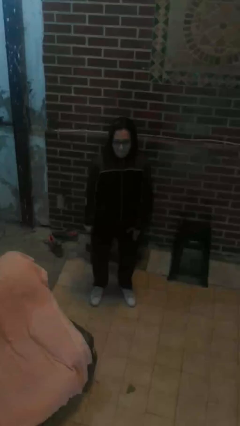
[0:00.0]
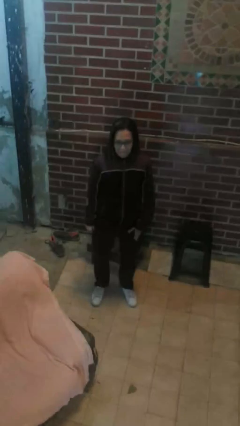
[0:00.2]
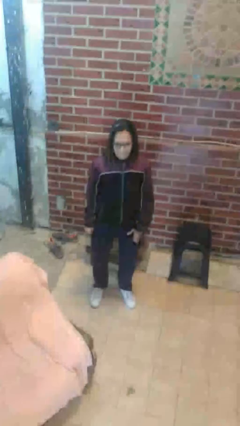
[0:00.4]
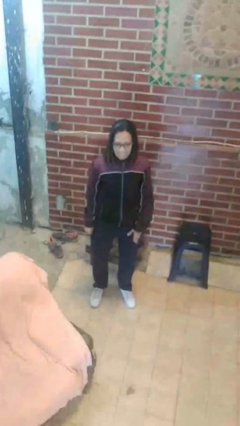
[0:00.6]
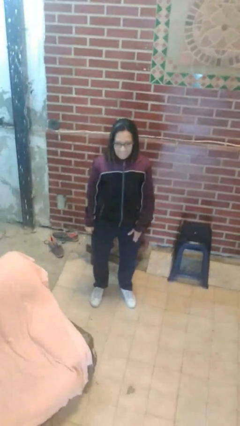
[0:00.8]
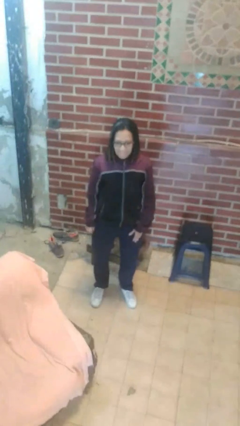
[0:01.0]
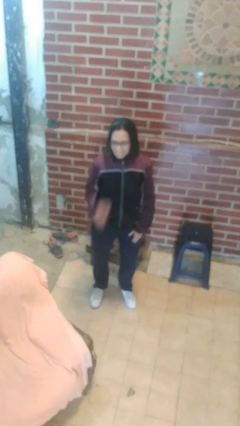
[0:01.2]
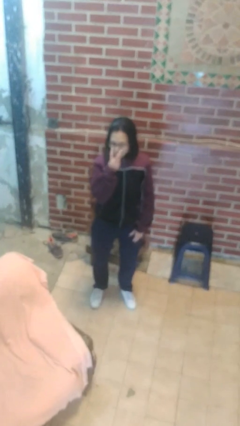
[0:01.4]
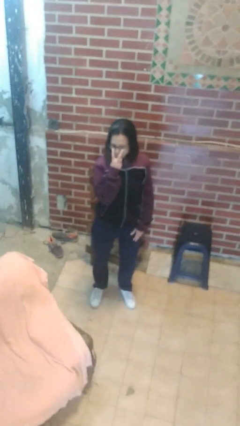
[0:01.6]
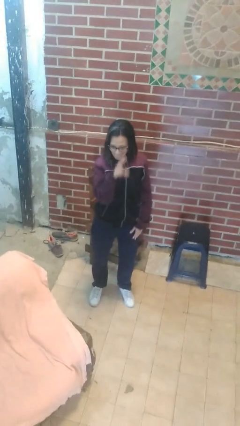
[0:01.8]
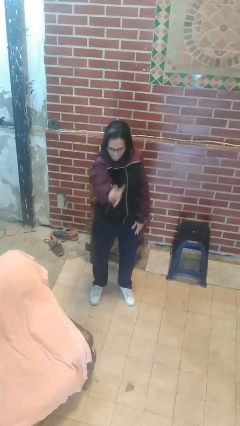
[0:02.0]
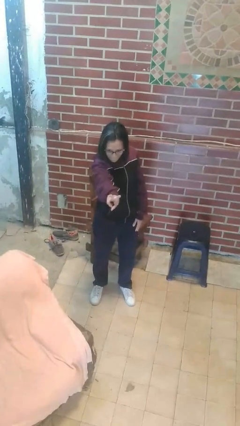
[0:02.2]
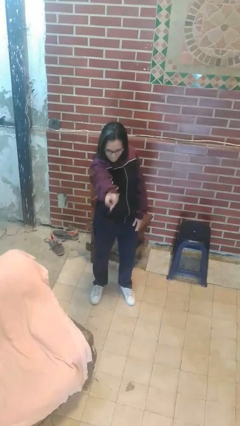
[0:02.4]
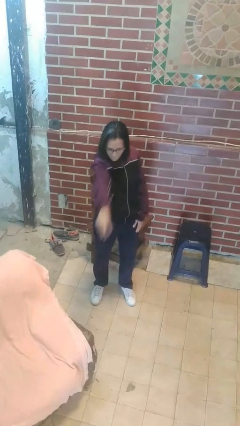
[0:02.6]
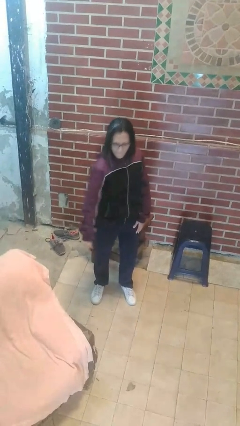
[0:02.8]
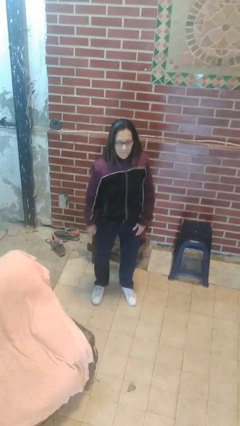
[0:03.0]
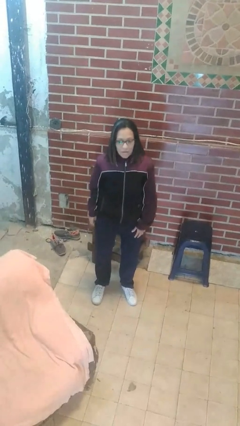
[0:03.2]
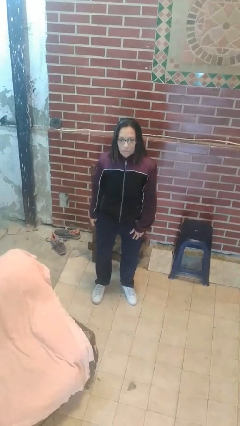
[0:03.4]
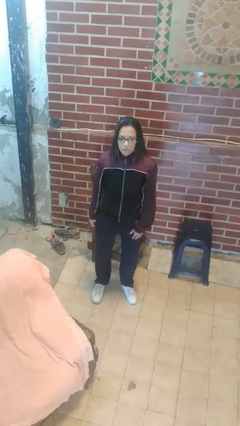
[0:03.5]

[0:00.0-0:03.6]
person gestures watch closely

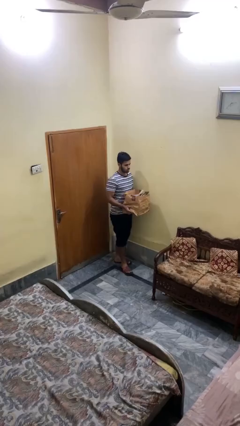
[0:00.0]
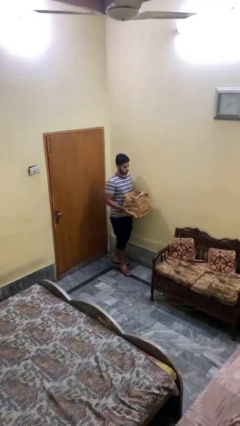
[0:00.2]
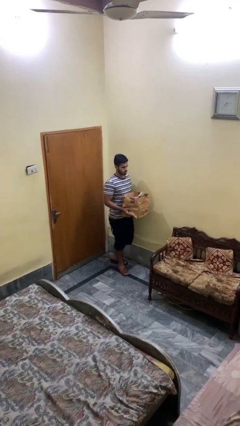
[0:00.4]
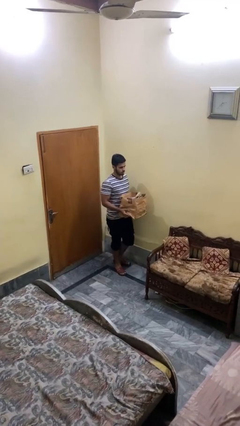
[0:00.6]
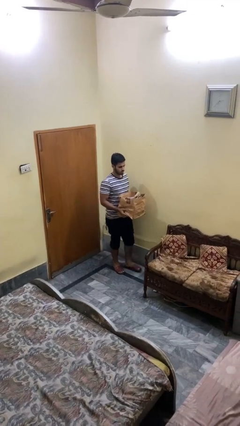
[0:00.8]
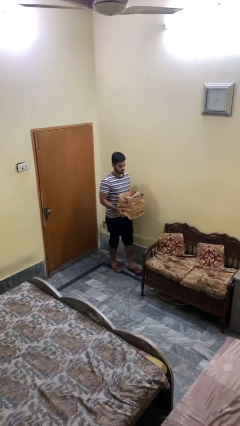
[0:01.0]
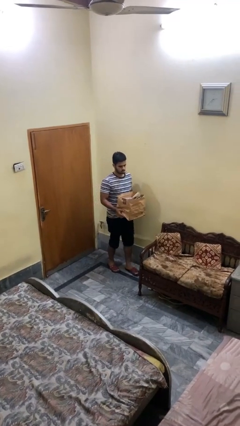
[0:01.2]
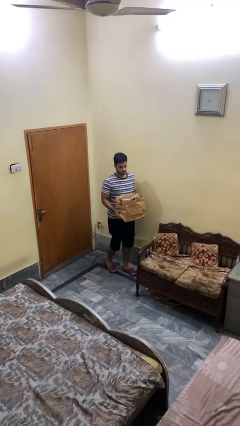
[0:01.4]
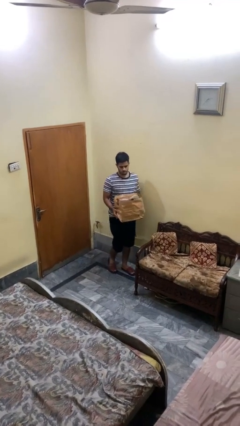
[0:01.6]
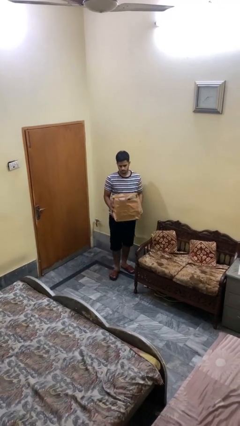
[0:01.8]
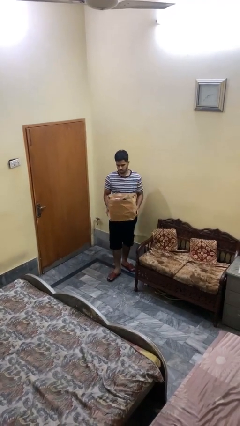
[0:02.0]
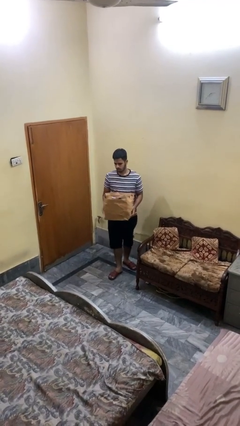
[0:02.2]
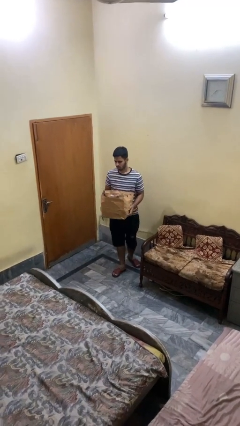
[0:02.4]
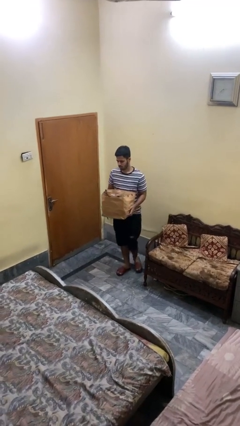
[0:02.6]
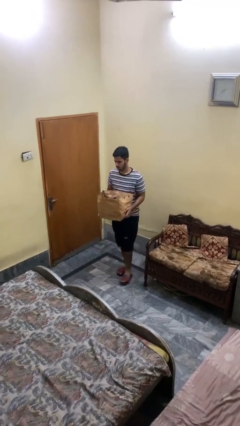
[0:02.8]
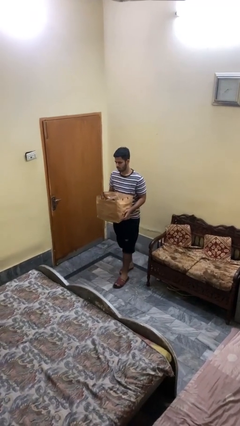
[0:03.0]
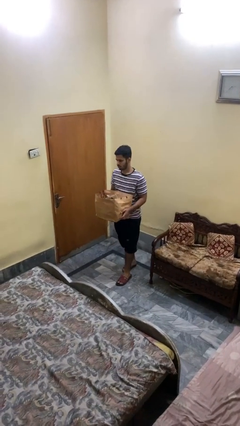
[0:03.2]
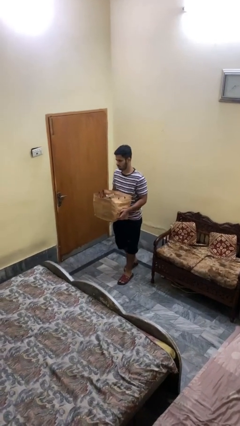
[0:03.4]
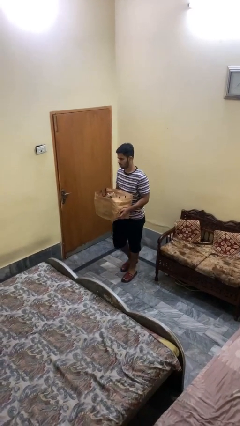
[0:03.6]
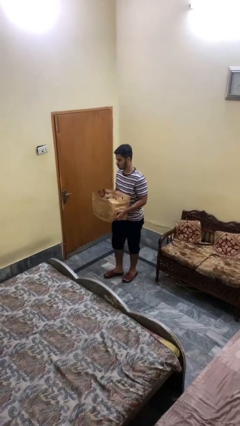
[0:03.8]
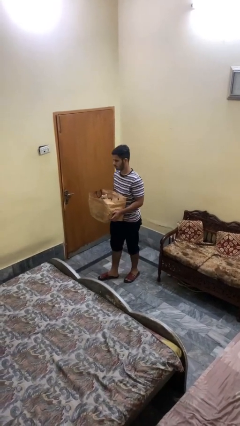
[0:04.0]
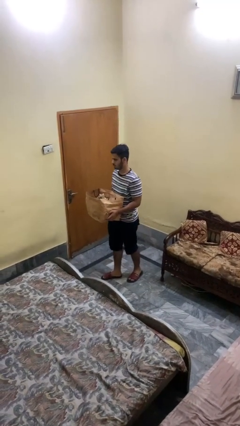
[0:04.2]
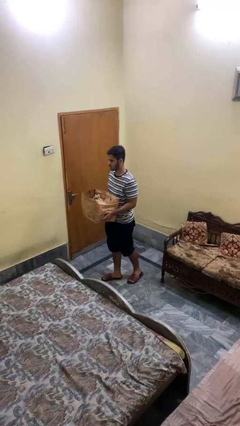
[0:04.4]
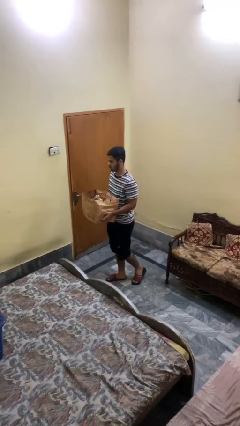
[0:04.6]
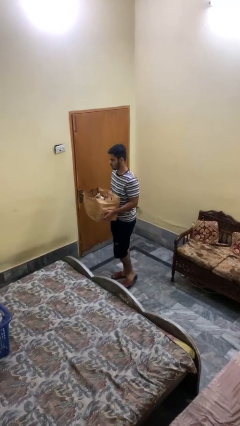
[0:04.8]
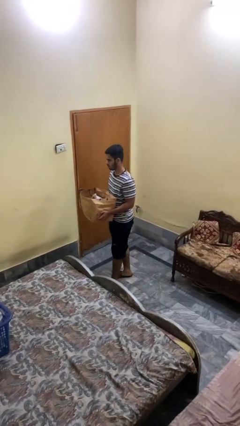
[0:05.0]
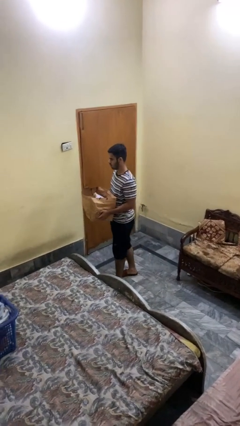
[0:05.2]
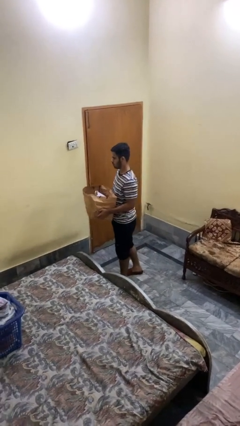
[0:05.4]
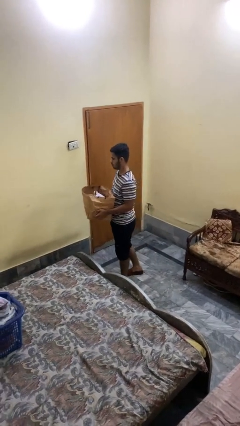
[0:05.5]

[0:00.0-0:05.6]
person carries groceries

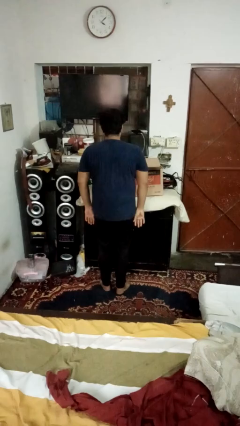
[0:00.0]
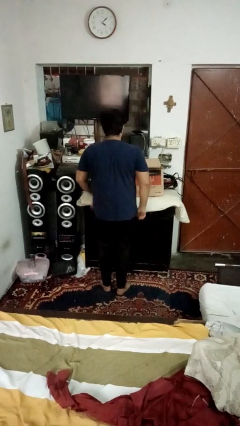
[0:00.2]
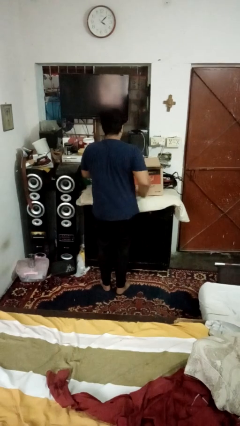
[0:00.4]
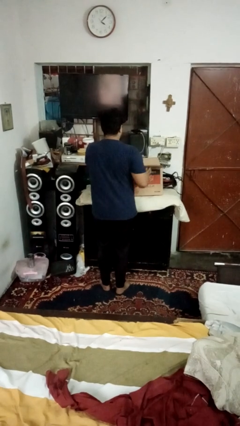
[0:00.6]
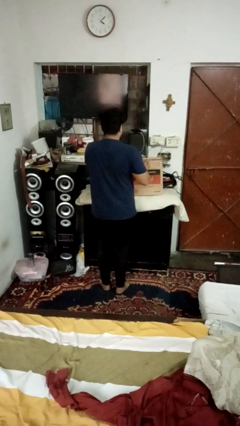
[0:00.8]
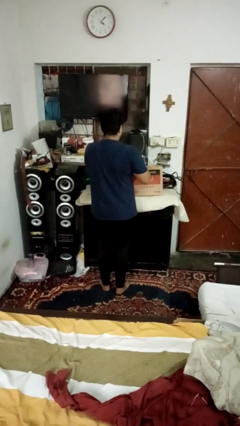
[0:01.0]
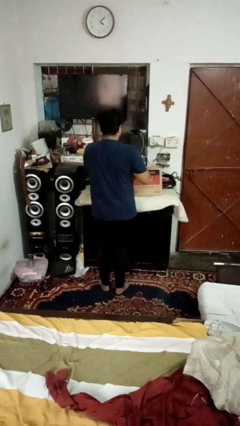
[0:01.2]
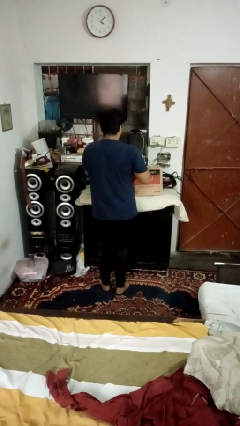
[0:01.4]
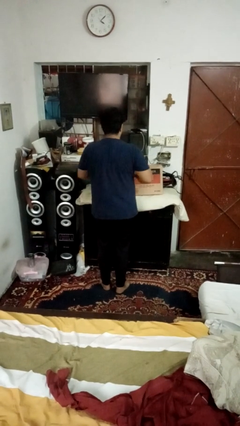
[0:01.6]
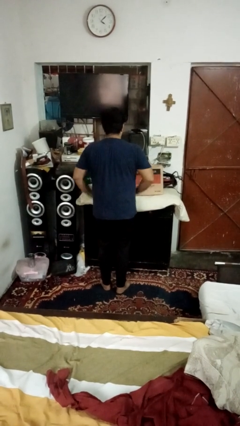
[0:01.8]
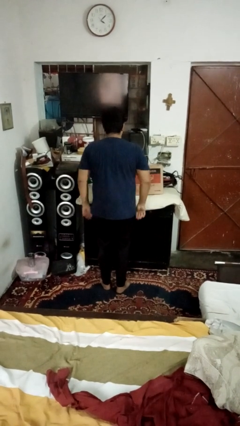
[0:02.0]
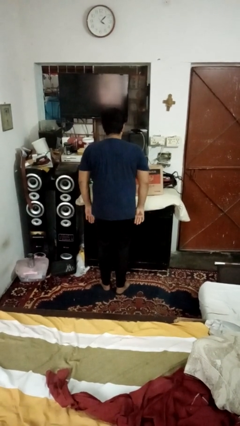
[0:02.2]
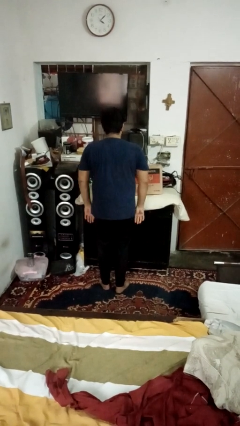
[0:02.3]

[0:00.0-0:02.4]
person closes box

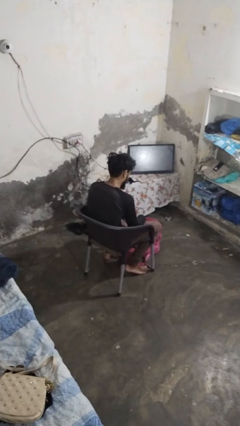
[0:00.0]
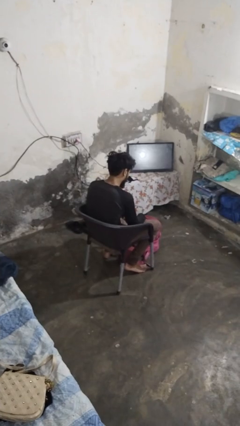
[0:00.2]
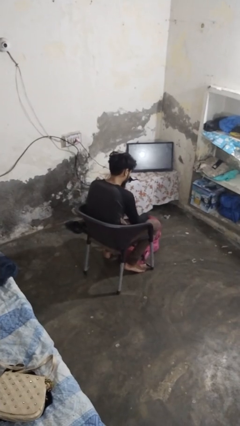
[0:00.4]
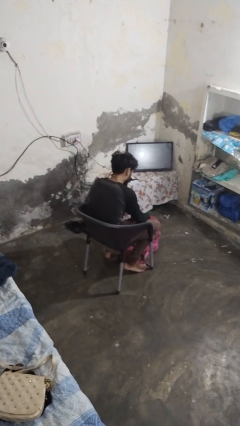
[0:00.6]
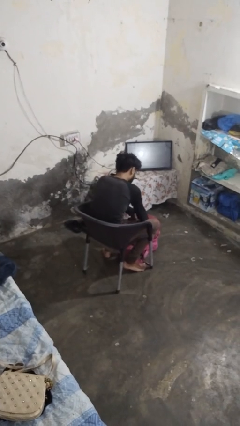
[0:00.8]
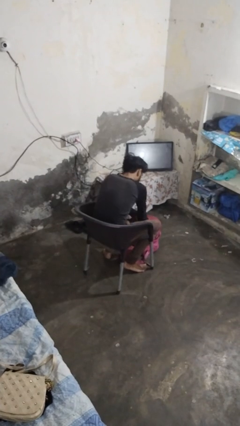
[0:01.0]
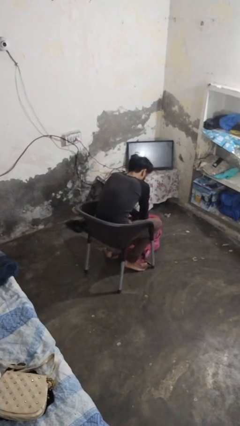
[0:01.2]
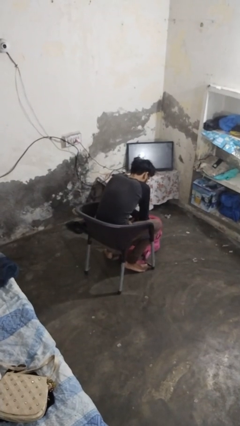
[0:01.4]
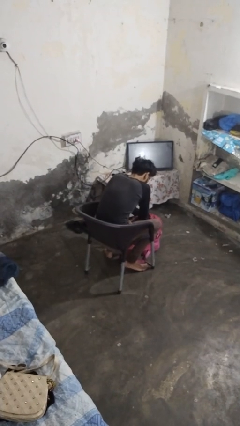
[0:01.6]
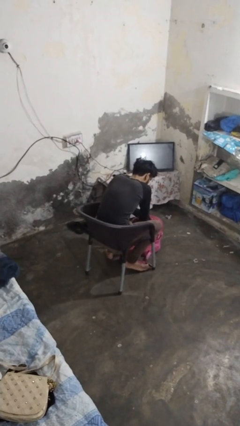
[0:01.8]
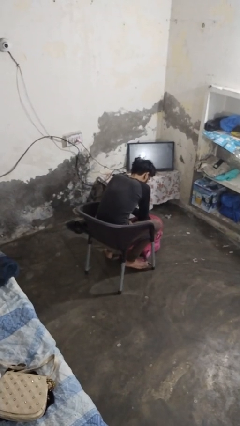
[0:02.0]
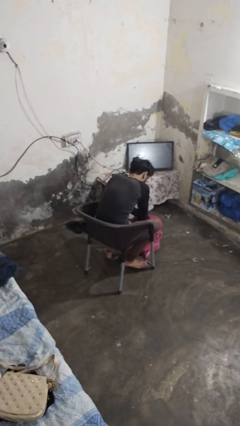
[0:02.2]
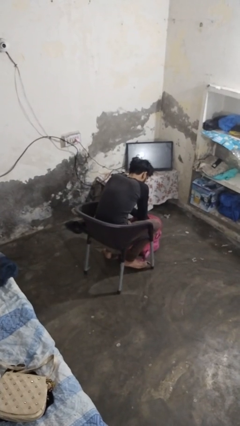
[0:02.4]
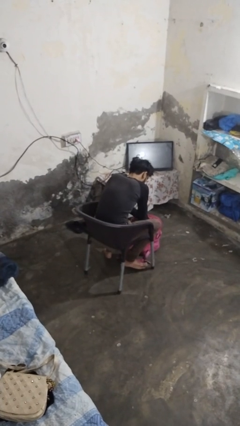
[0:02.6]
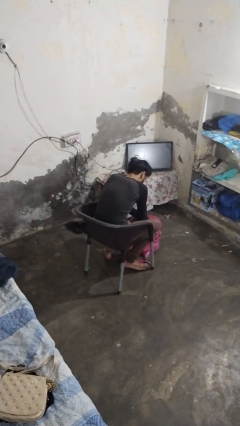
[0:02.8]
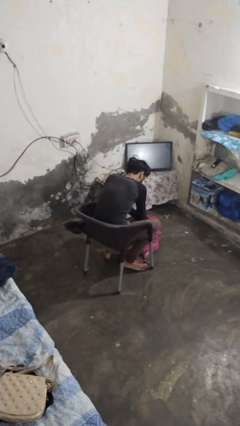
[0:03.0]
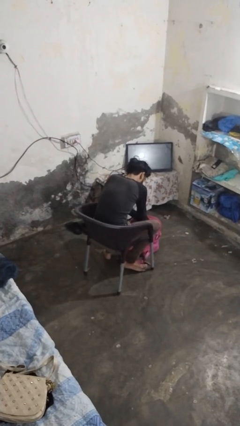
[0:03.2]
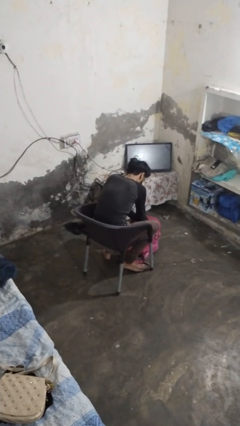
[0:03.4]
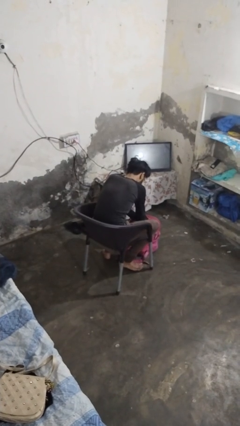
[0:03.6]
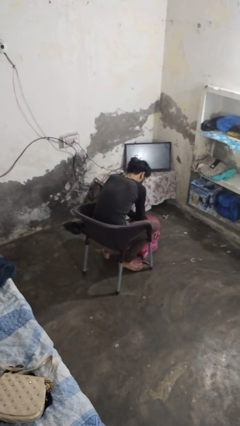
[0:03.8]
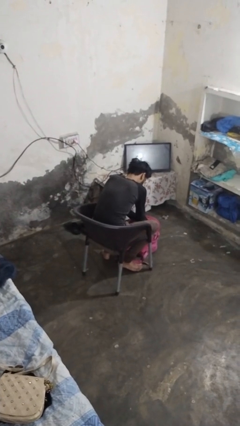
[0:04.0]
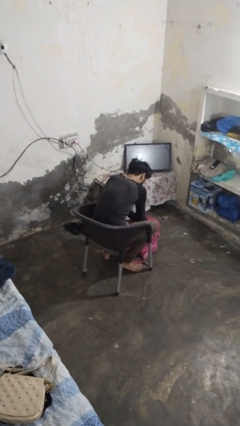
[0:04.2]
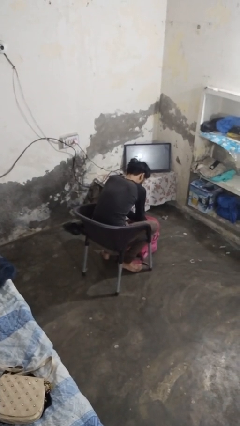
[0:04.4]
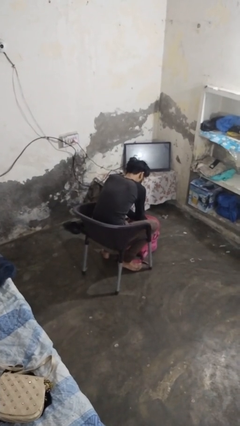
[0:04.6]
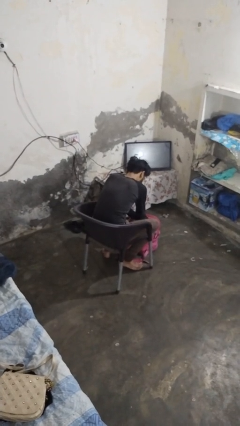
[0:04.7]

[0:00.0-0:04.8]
person searches in backpack

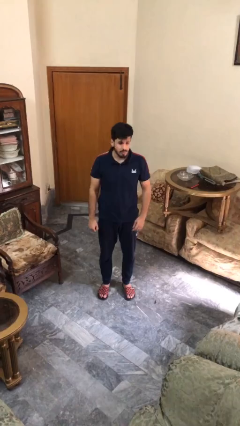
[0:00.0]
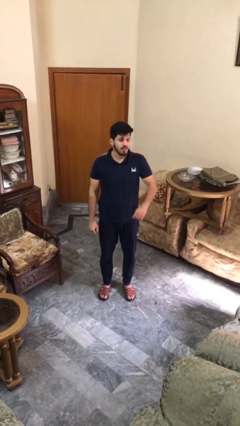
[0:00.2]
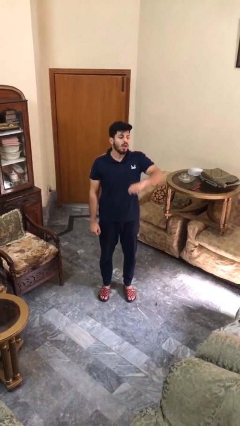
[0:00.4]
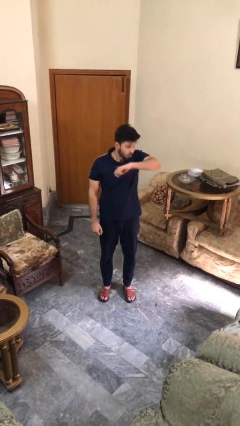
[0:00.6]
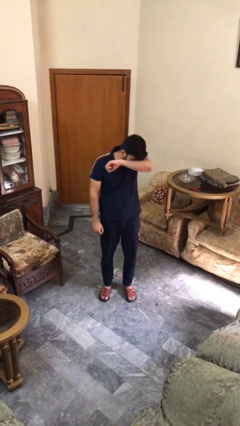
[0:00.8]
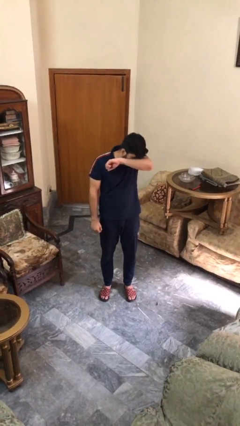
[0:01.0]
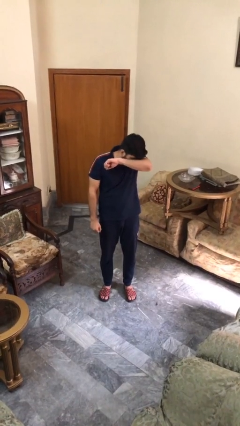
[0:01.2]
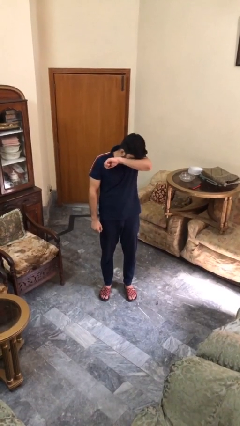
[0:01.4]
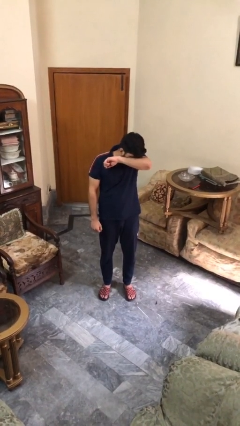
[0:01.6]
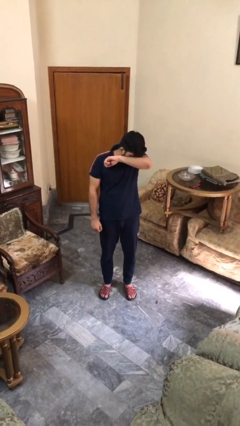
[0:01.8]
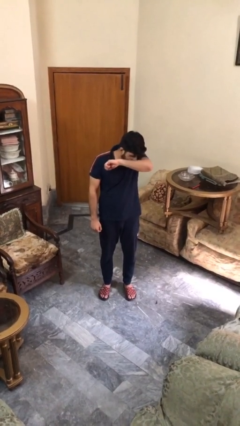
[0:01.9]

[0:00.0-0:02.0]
person sneezes into arm
